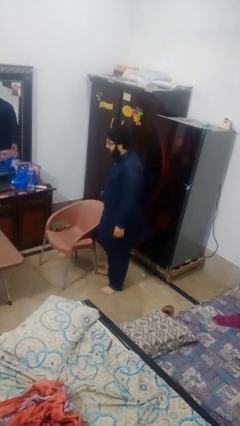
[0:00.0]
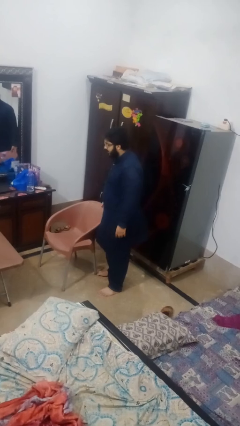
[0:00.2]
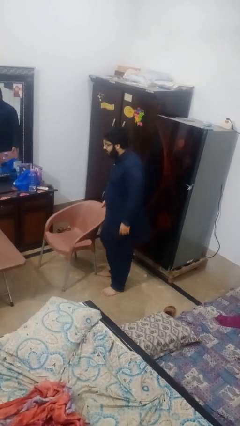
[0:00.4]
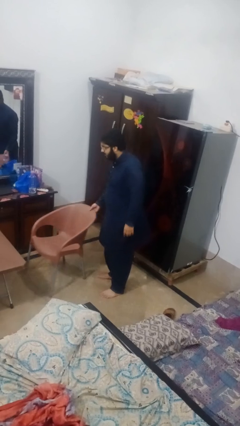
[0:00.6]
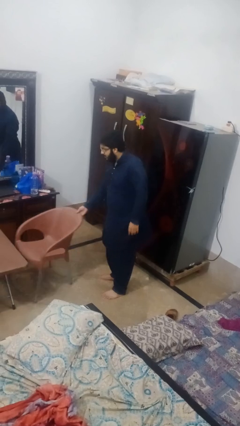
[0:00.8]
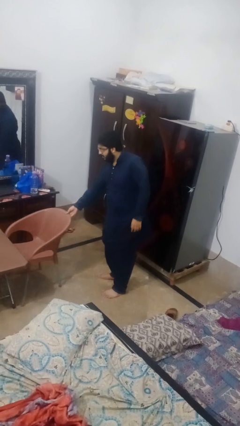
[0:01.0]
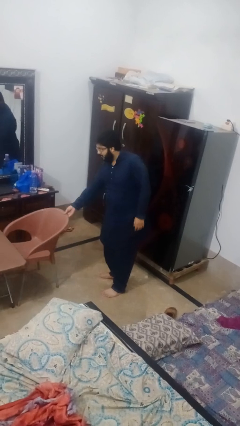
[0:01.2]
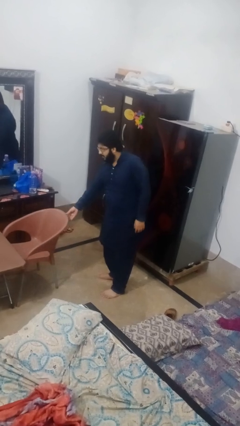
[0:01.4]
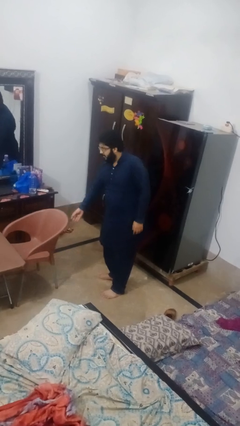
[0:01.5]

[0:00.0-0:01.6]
person pushes in chair

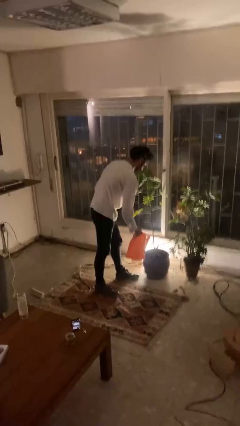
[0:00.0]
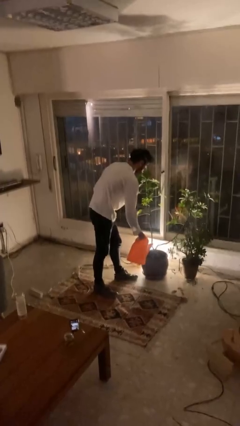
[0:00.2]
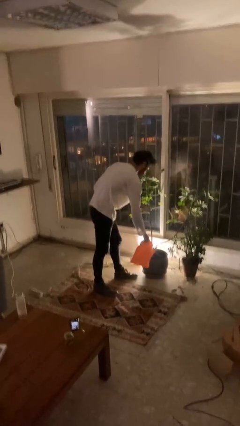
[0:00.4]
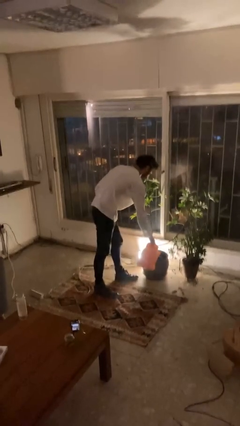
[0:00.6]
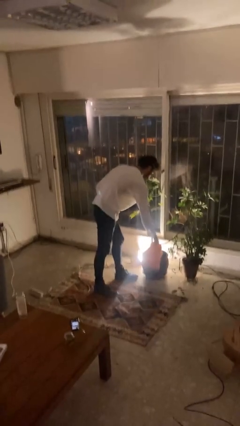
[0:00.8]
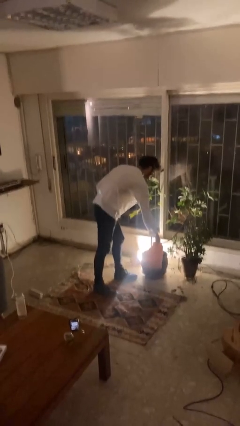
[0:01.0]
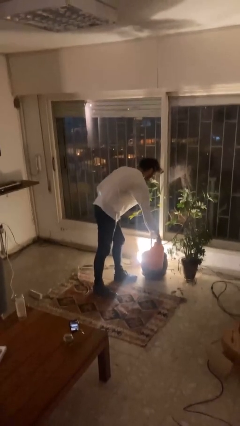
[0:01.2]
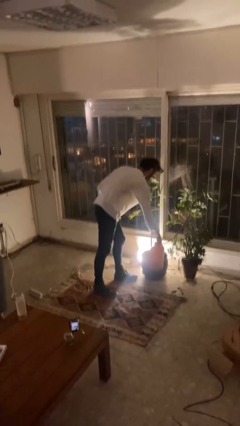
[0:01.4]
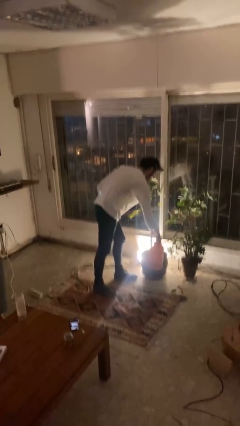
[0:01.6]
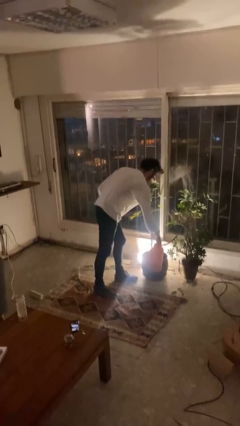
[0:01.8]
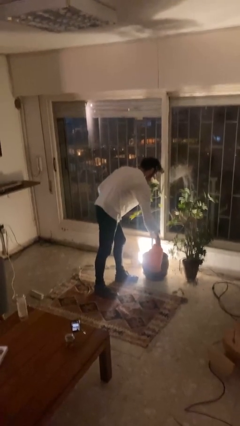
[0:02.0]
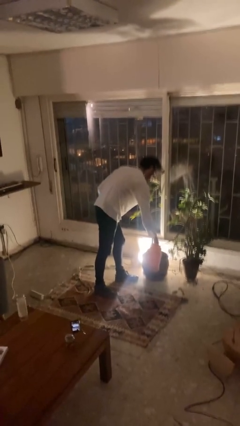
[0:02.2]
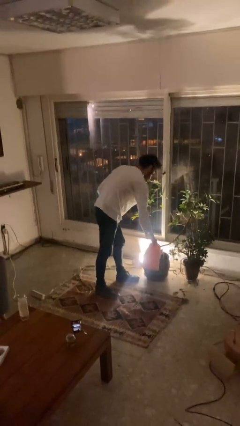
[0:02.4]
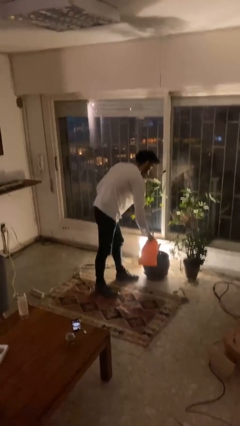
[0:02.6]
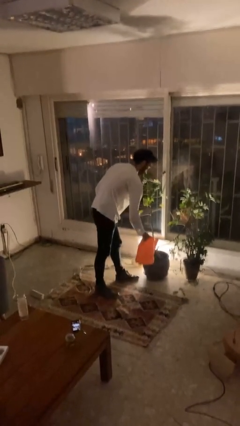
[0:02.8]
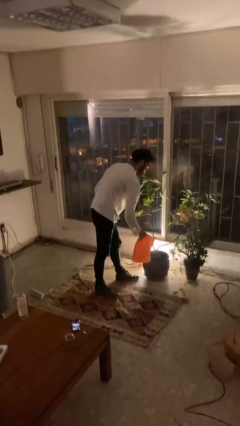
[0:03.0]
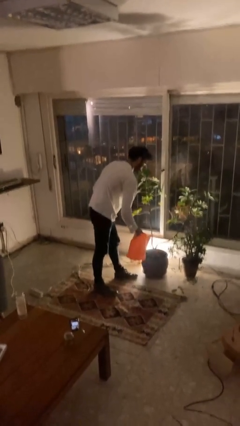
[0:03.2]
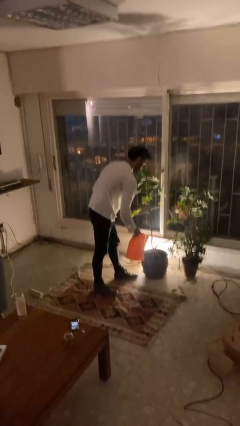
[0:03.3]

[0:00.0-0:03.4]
person waters houseplant

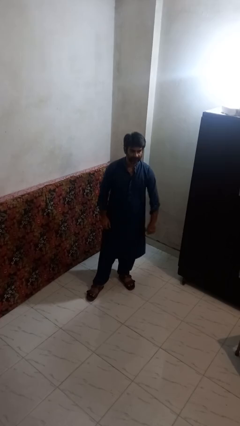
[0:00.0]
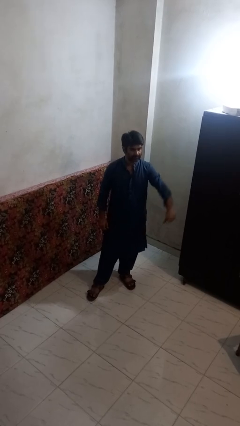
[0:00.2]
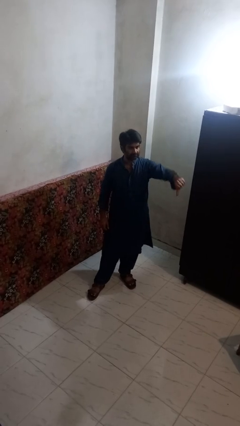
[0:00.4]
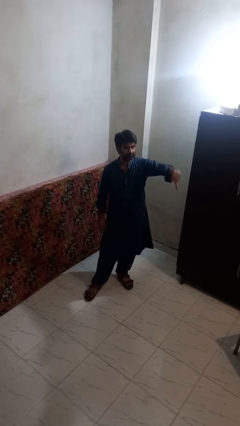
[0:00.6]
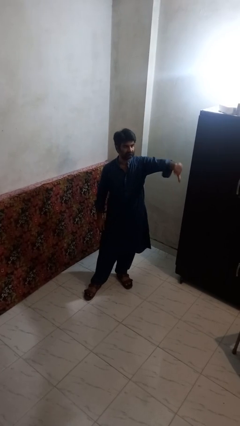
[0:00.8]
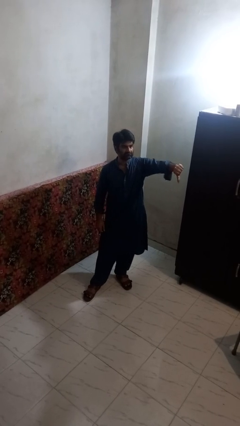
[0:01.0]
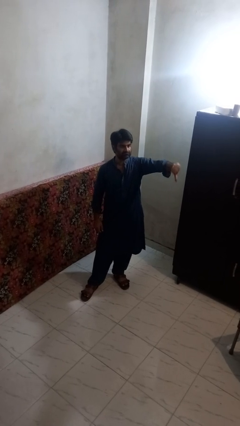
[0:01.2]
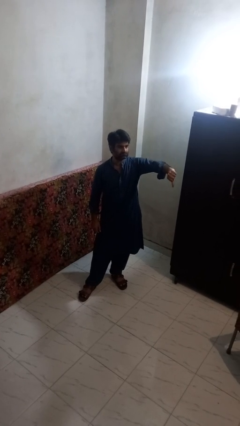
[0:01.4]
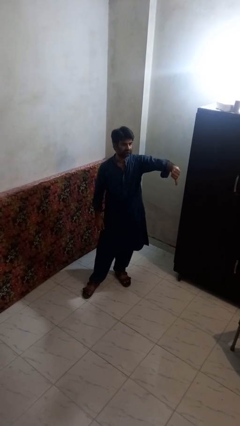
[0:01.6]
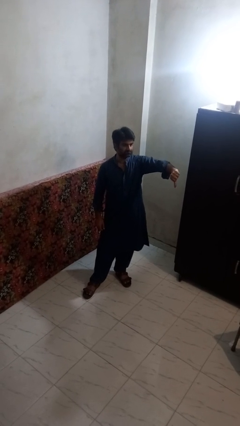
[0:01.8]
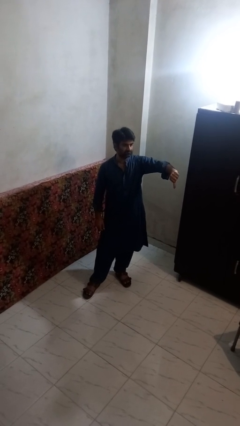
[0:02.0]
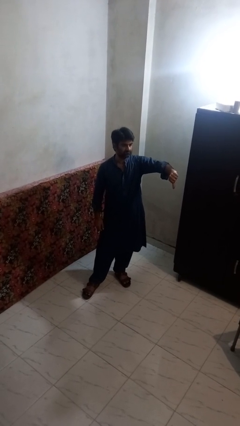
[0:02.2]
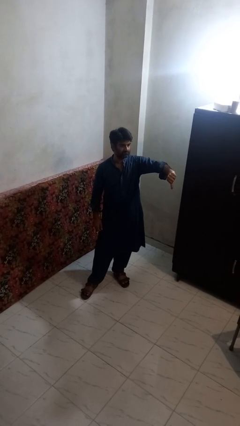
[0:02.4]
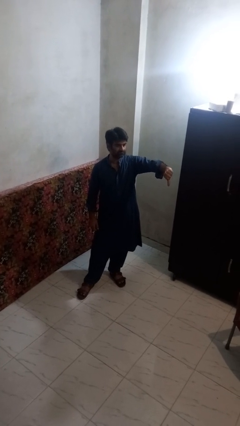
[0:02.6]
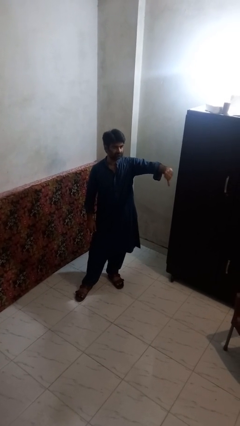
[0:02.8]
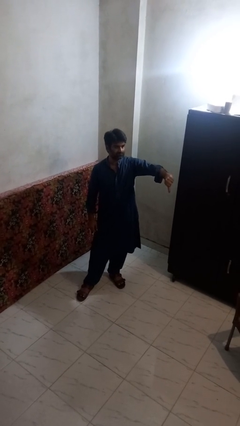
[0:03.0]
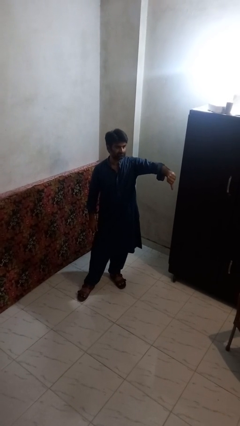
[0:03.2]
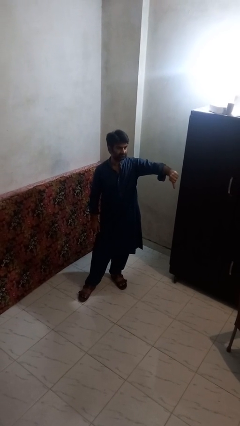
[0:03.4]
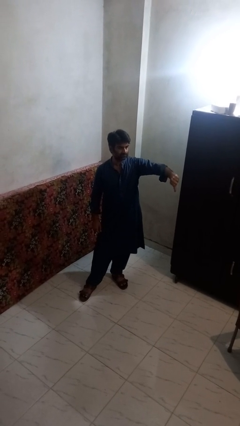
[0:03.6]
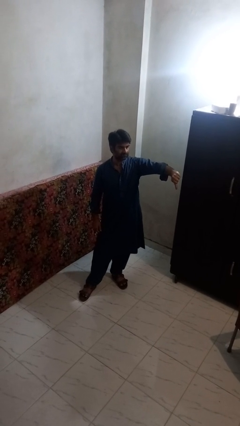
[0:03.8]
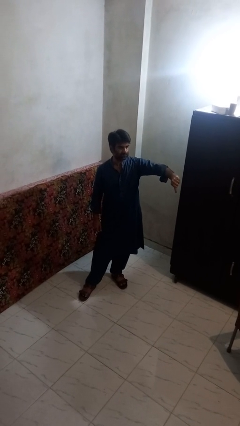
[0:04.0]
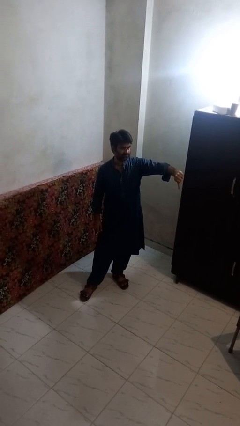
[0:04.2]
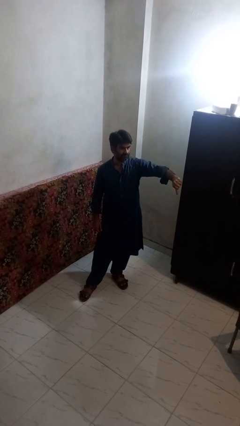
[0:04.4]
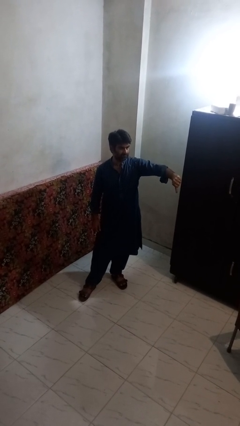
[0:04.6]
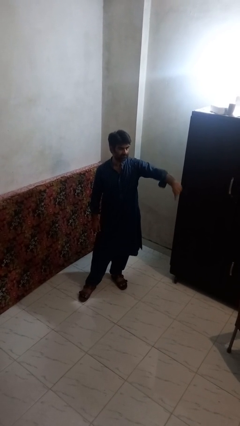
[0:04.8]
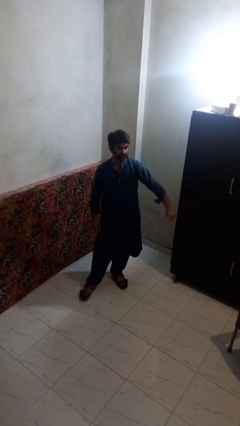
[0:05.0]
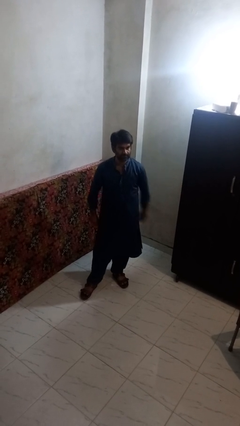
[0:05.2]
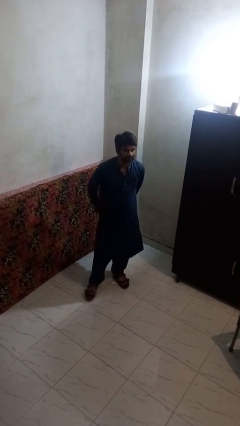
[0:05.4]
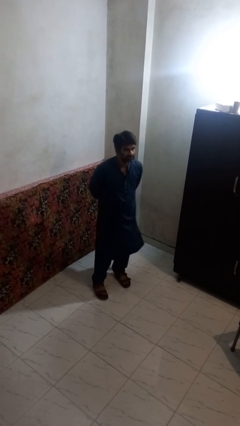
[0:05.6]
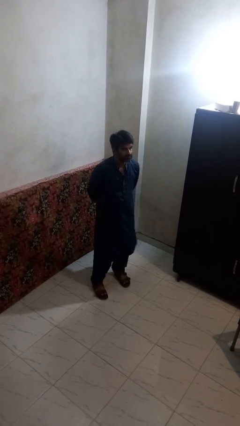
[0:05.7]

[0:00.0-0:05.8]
person gestures thumbs down

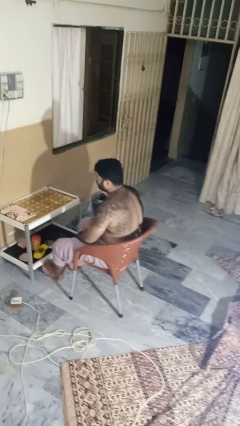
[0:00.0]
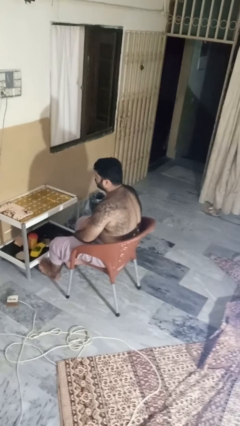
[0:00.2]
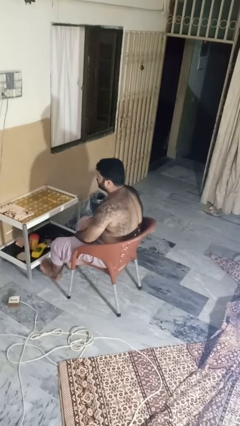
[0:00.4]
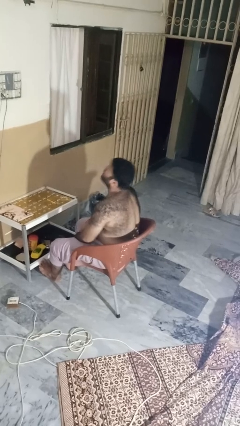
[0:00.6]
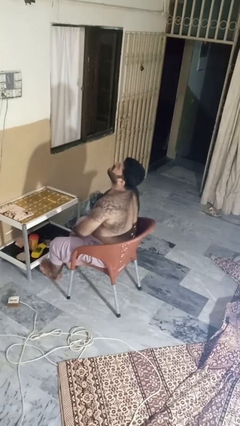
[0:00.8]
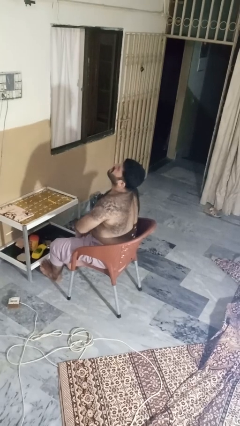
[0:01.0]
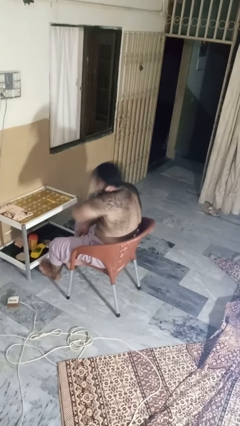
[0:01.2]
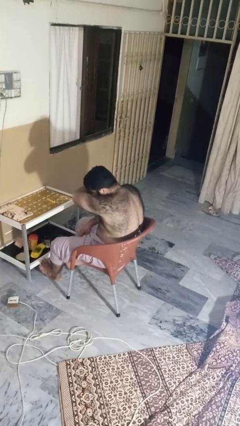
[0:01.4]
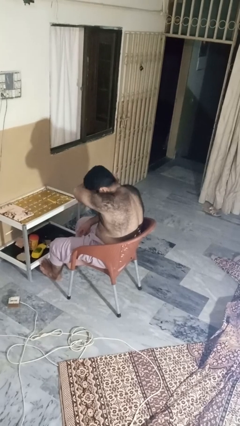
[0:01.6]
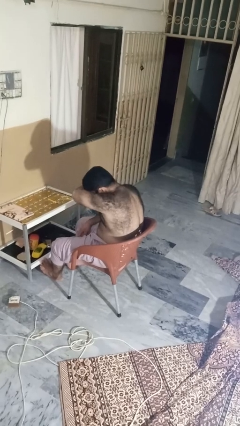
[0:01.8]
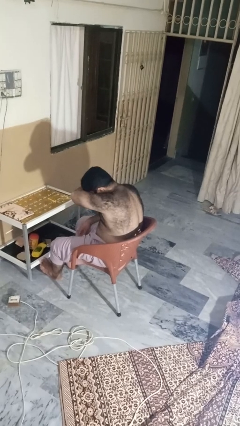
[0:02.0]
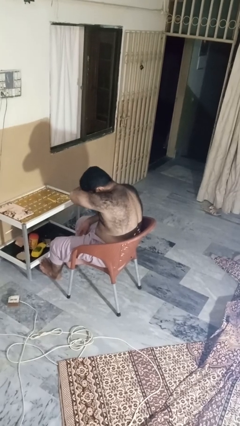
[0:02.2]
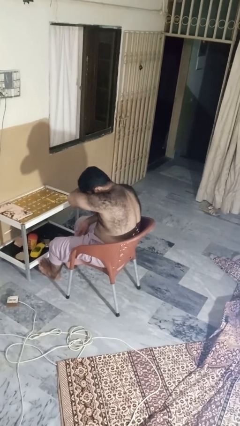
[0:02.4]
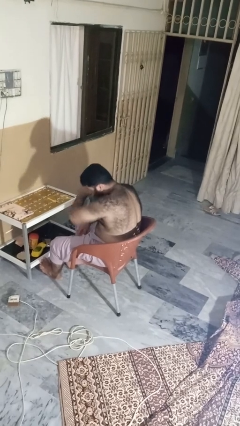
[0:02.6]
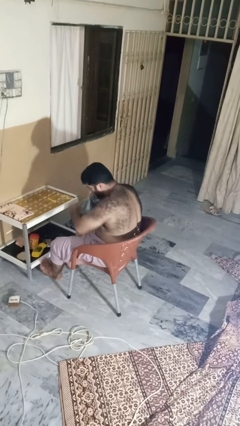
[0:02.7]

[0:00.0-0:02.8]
person sneezes into arm

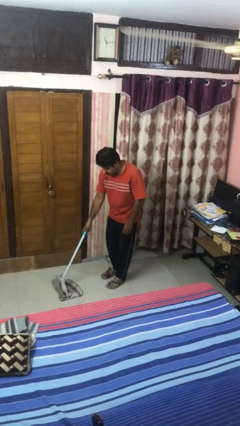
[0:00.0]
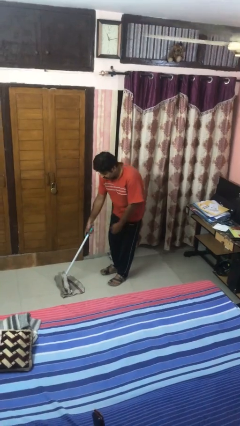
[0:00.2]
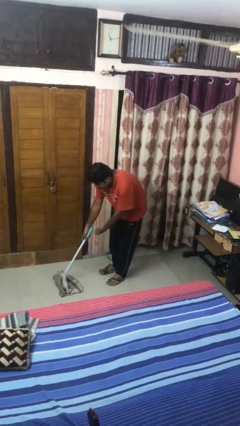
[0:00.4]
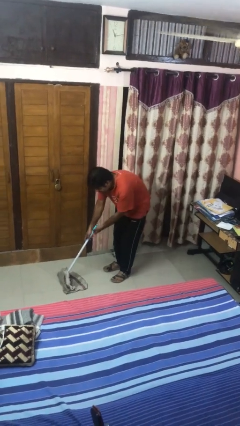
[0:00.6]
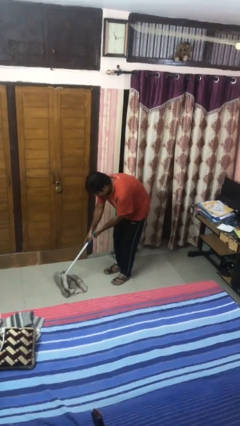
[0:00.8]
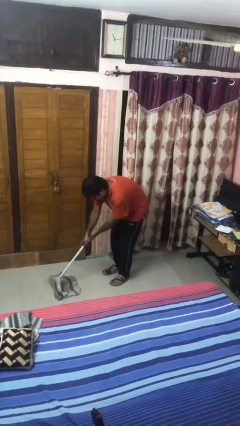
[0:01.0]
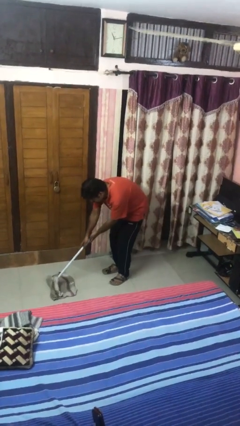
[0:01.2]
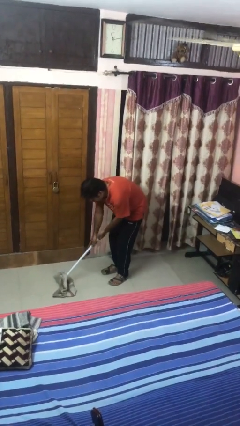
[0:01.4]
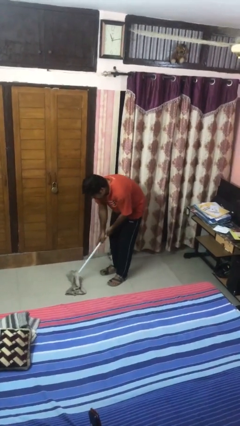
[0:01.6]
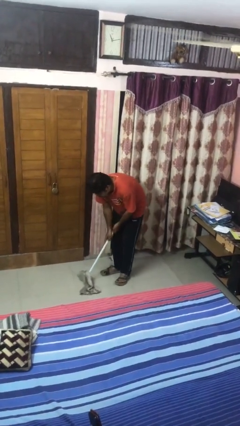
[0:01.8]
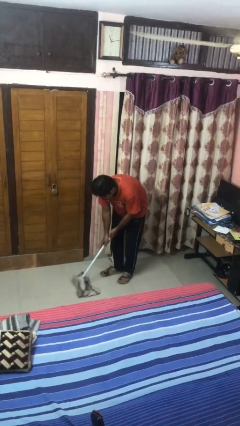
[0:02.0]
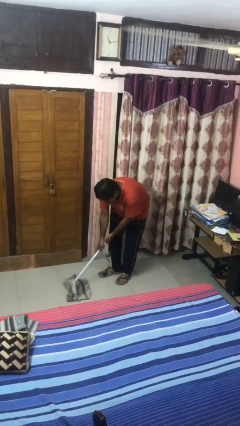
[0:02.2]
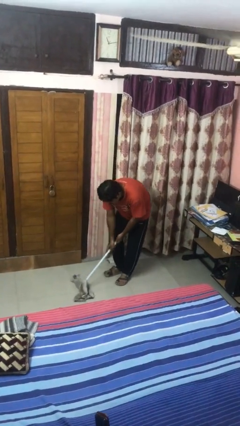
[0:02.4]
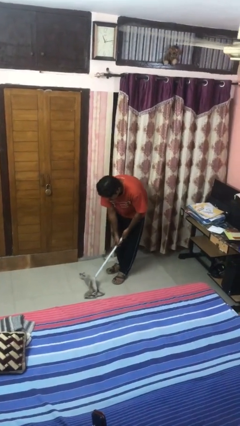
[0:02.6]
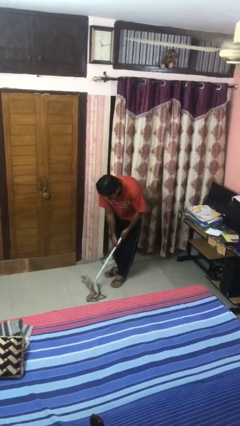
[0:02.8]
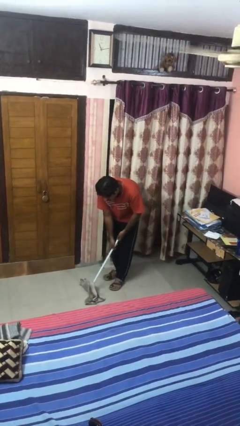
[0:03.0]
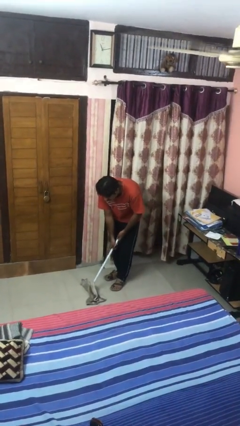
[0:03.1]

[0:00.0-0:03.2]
person mops

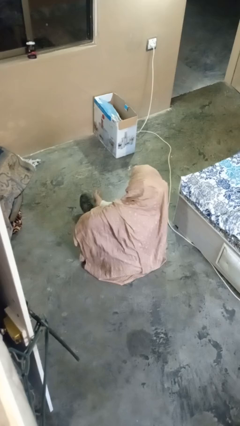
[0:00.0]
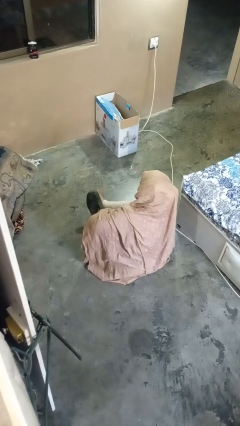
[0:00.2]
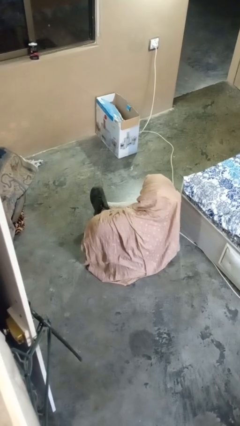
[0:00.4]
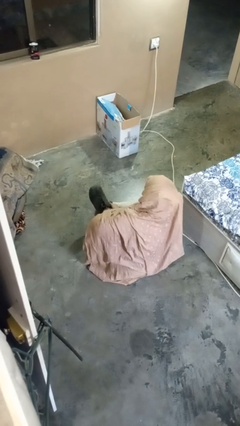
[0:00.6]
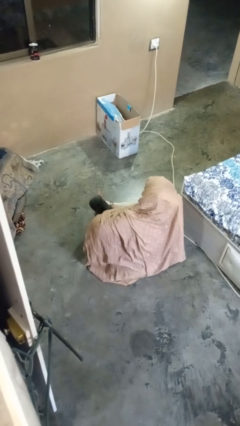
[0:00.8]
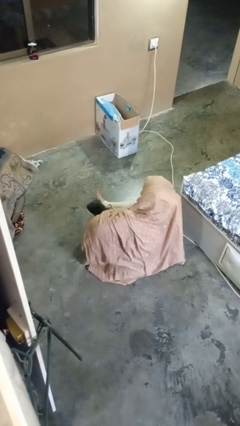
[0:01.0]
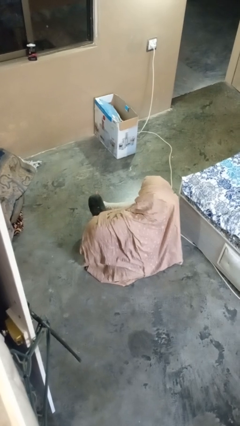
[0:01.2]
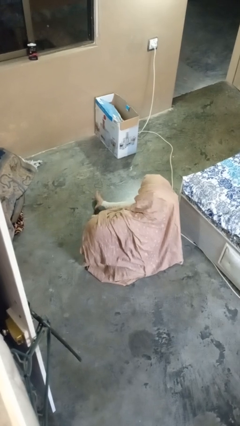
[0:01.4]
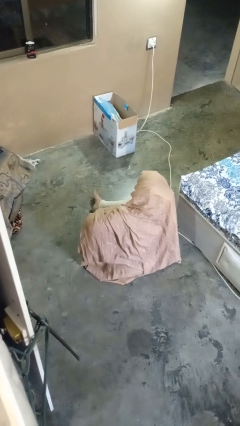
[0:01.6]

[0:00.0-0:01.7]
person puts on shoes
